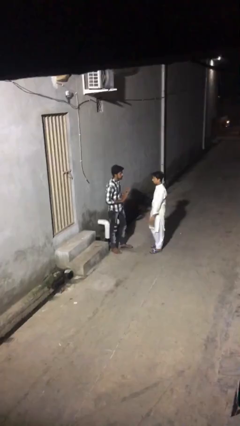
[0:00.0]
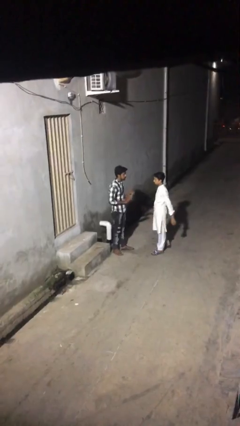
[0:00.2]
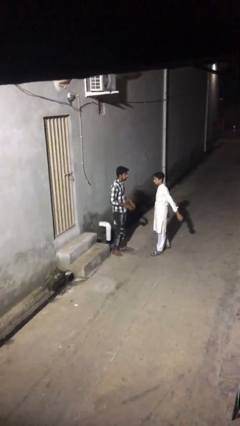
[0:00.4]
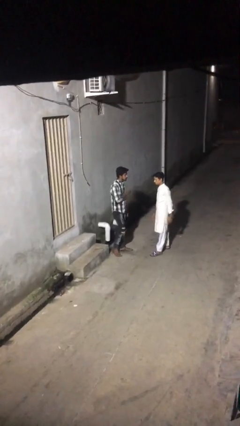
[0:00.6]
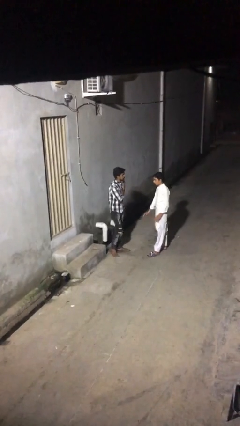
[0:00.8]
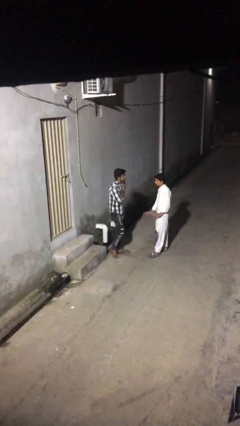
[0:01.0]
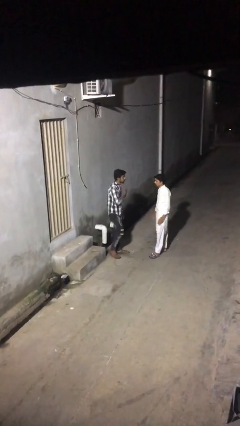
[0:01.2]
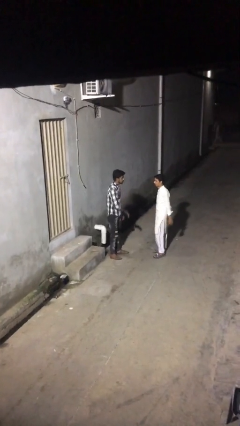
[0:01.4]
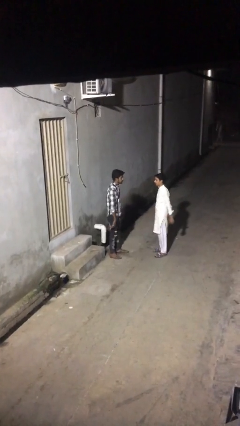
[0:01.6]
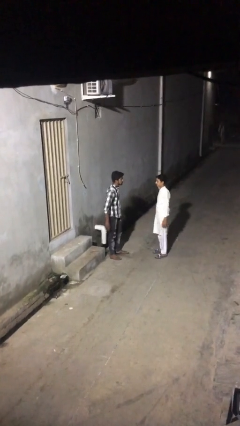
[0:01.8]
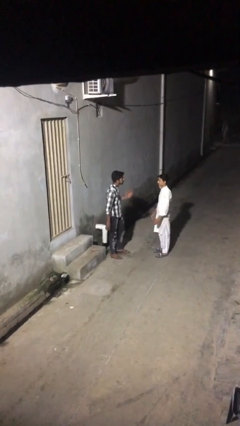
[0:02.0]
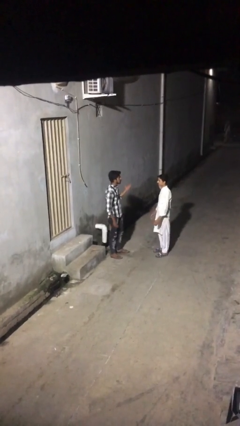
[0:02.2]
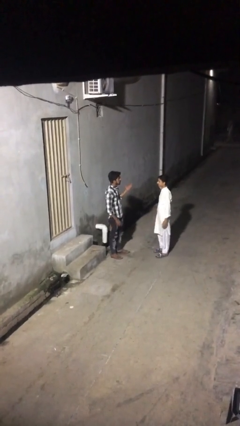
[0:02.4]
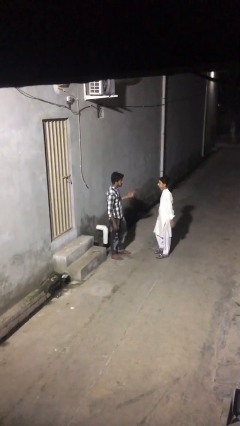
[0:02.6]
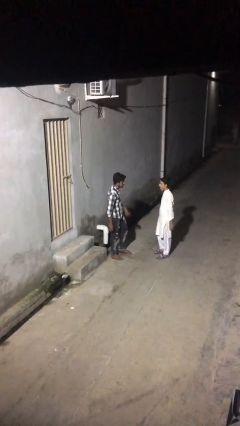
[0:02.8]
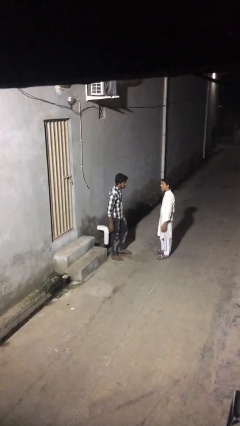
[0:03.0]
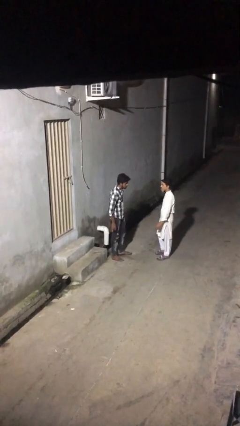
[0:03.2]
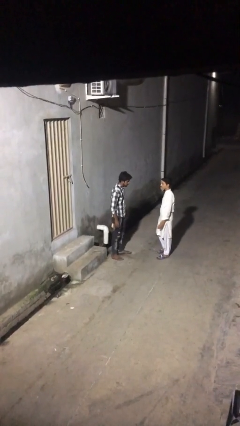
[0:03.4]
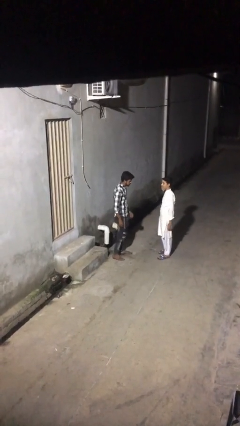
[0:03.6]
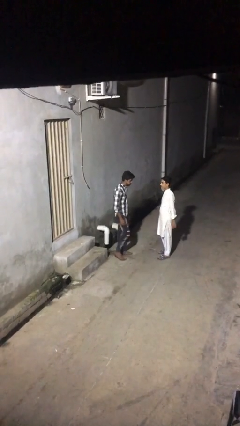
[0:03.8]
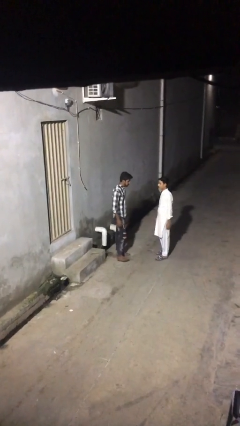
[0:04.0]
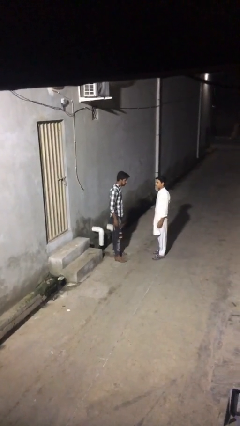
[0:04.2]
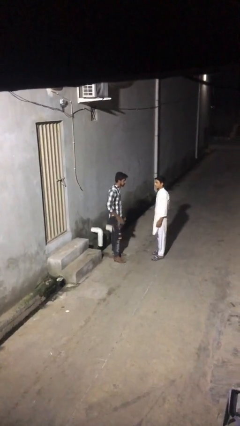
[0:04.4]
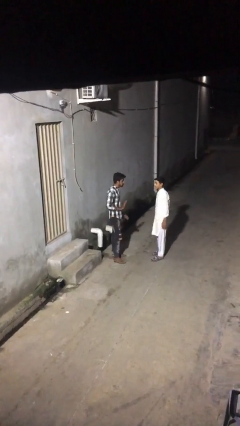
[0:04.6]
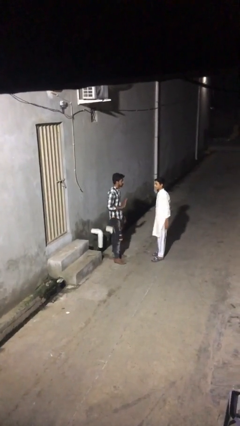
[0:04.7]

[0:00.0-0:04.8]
person talks to person

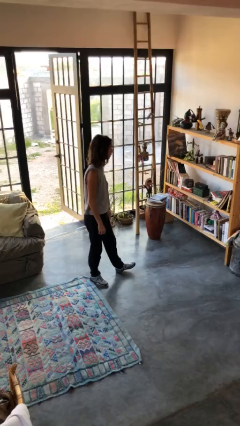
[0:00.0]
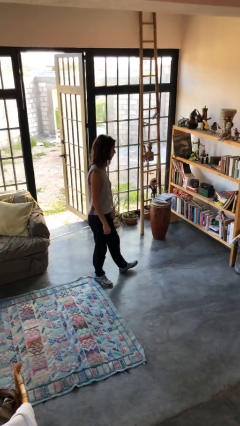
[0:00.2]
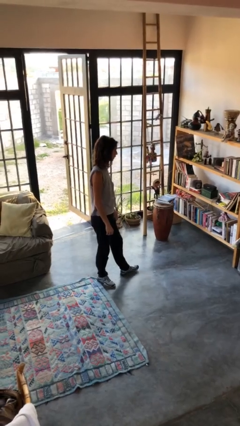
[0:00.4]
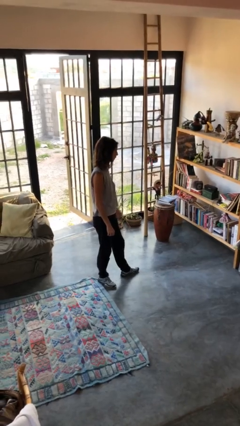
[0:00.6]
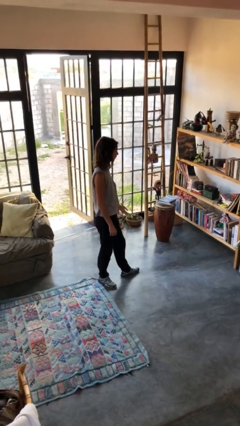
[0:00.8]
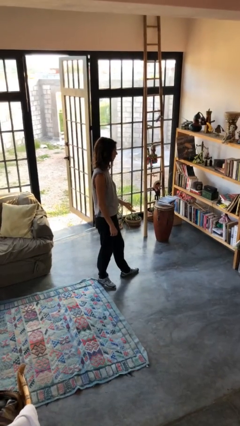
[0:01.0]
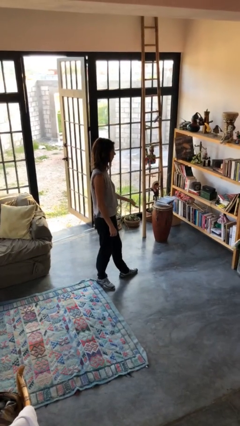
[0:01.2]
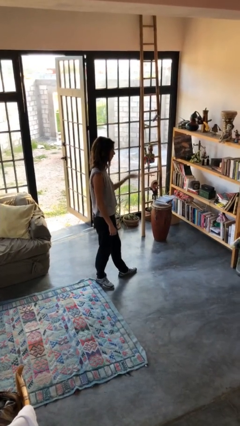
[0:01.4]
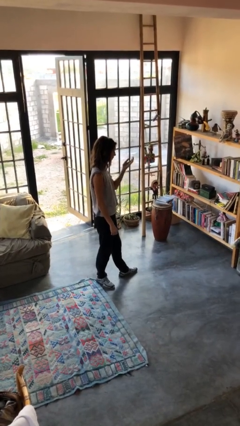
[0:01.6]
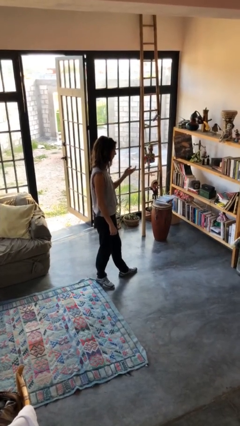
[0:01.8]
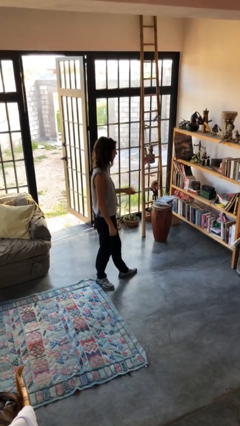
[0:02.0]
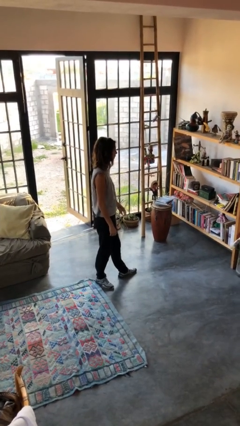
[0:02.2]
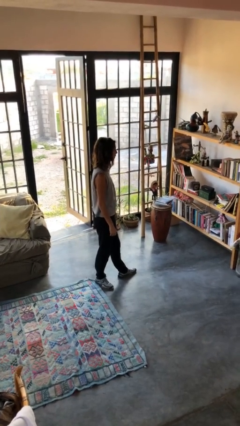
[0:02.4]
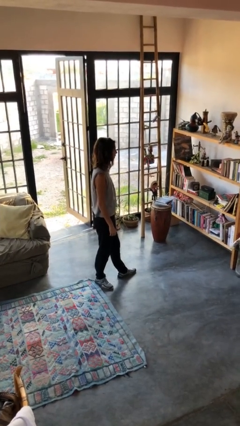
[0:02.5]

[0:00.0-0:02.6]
person gestures swipe up

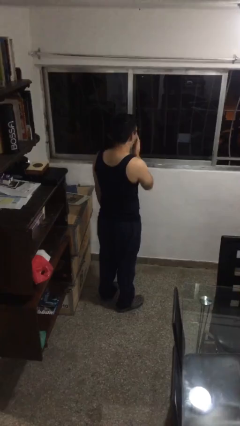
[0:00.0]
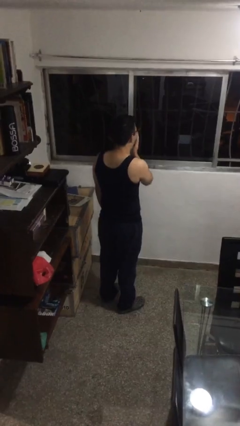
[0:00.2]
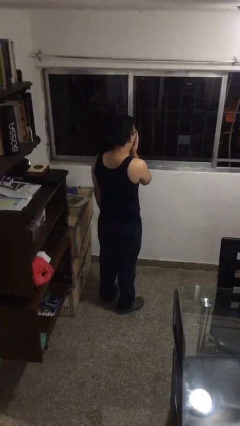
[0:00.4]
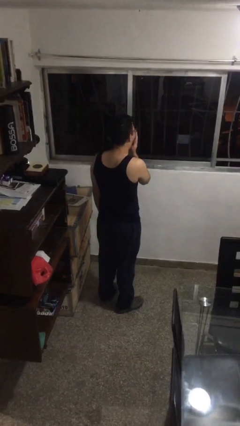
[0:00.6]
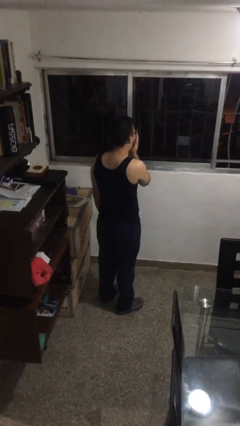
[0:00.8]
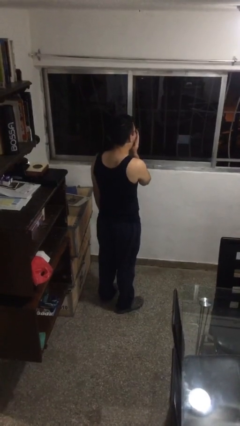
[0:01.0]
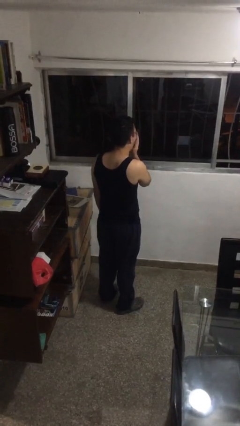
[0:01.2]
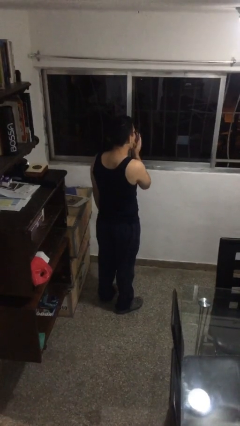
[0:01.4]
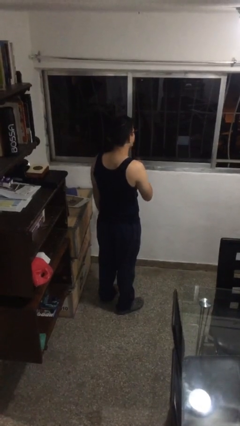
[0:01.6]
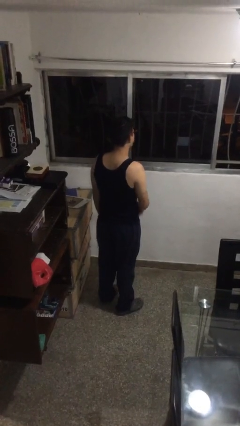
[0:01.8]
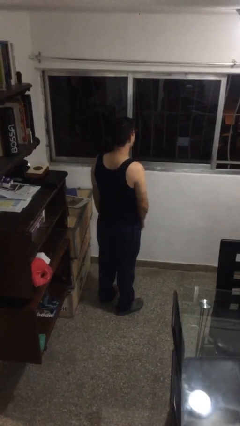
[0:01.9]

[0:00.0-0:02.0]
person yawns

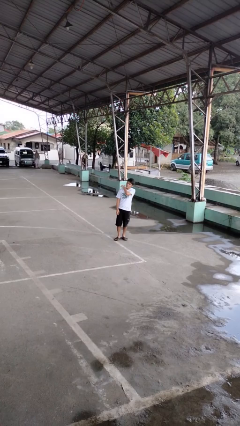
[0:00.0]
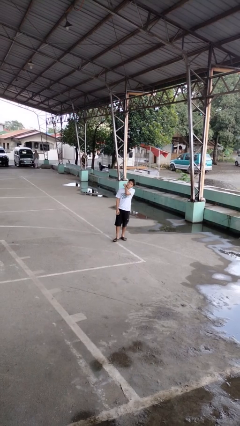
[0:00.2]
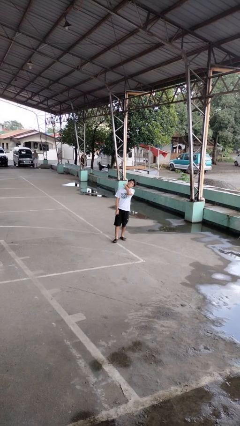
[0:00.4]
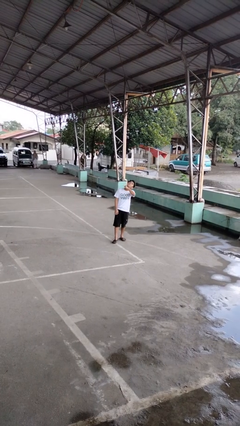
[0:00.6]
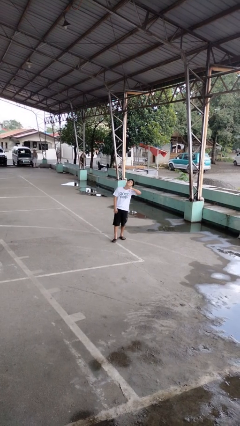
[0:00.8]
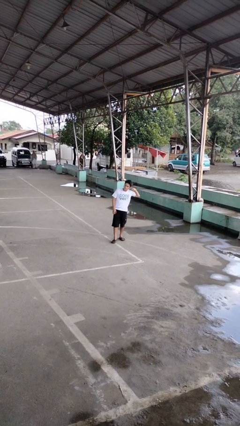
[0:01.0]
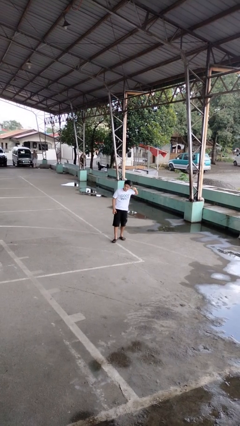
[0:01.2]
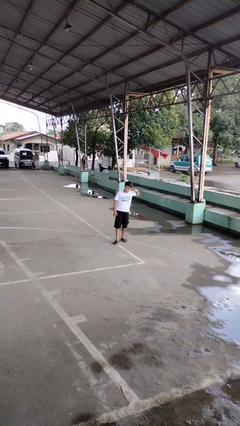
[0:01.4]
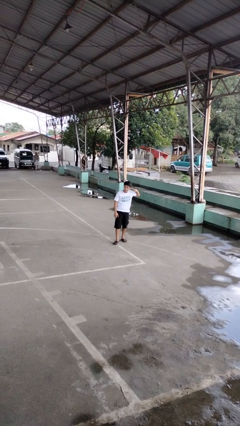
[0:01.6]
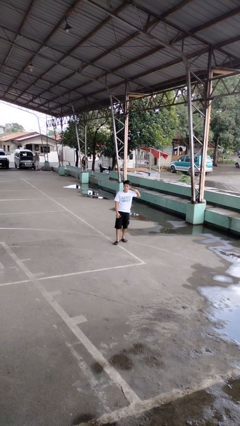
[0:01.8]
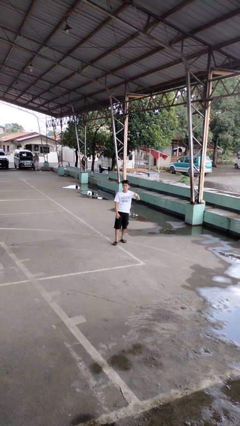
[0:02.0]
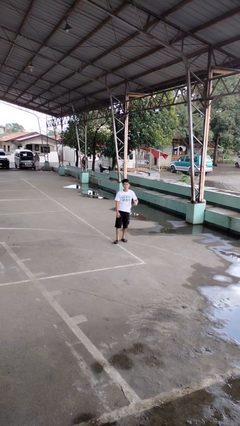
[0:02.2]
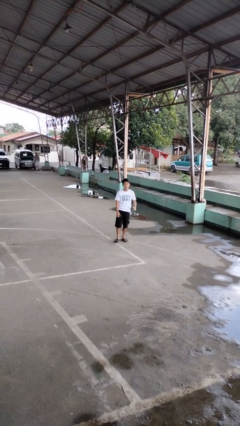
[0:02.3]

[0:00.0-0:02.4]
person gestures cut

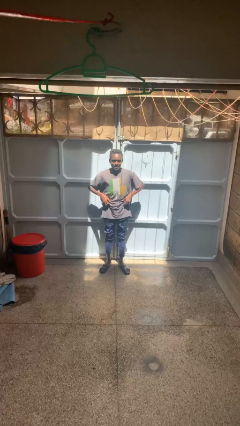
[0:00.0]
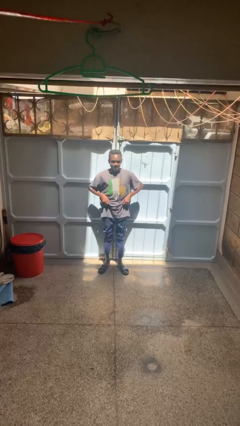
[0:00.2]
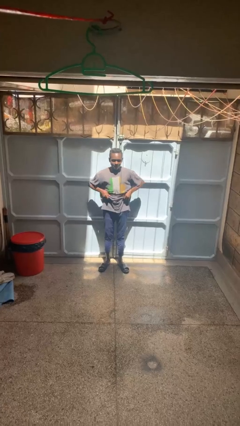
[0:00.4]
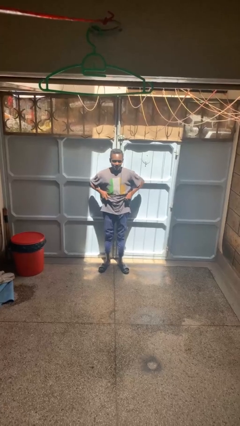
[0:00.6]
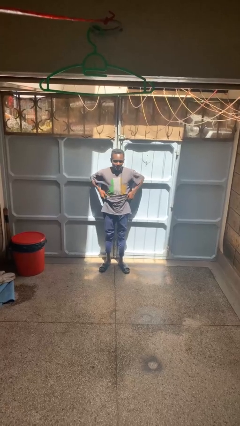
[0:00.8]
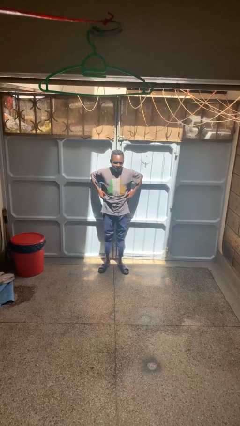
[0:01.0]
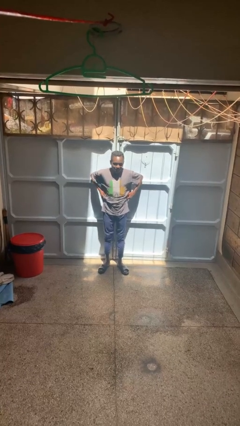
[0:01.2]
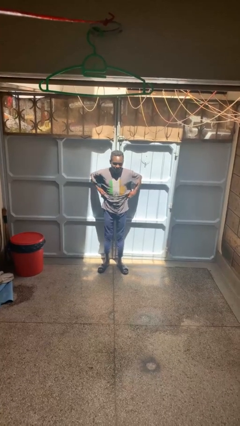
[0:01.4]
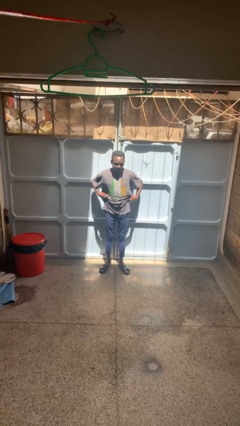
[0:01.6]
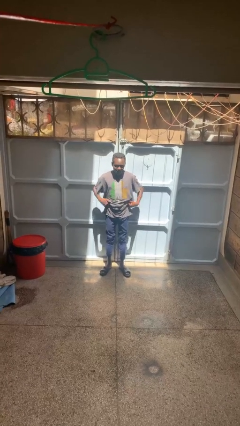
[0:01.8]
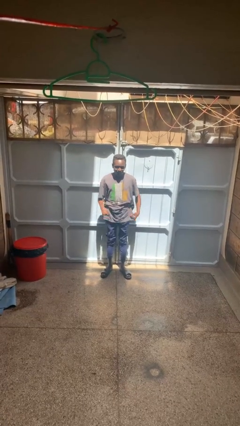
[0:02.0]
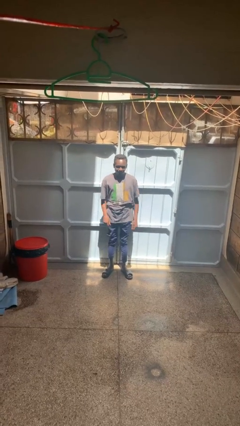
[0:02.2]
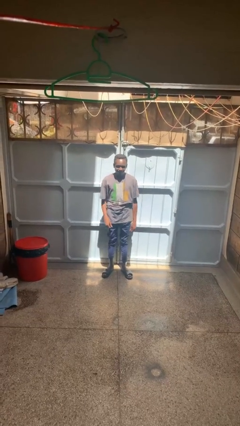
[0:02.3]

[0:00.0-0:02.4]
person hikes up pants

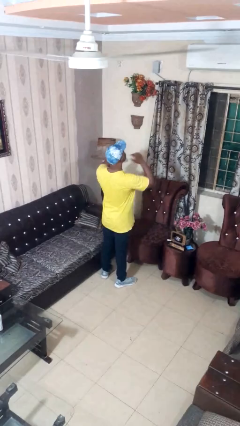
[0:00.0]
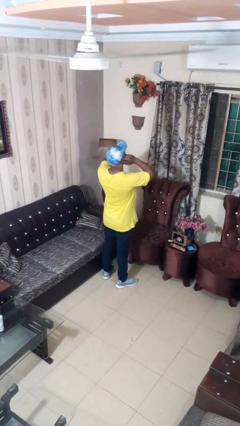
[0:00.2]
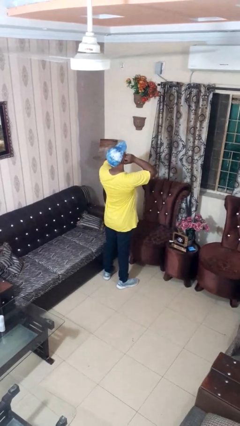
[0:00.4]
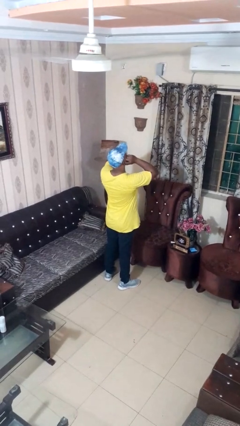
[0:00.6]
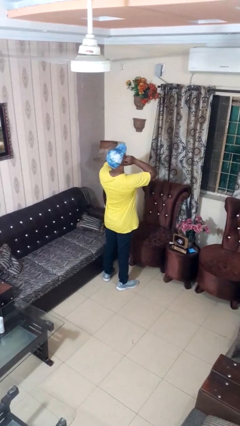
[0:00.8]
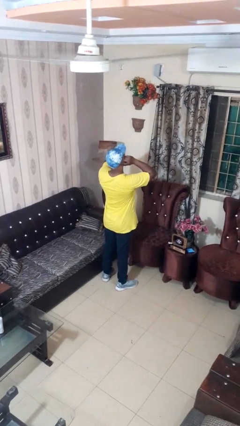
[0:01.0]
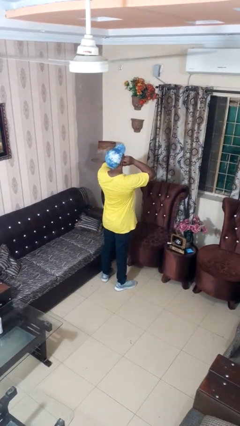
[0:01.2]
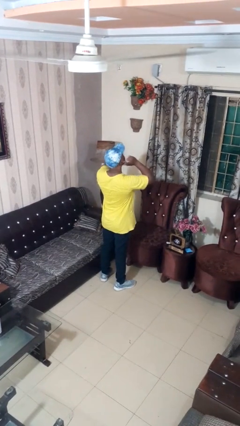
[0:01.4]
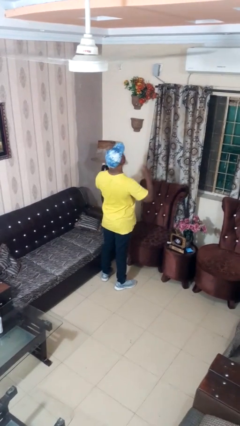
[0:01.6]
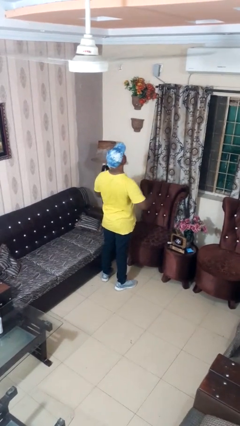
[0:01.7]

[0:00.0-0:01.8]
person puts fingers in ear

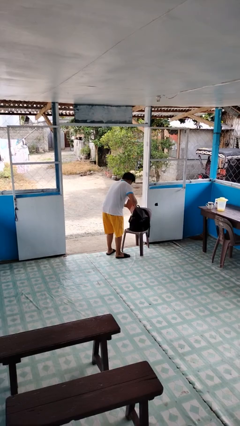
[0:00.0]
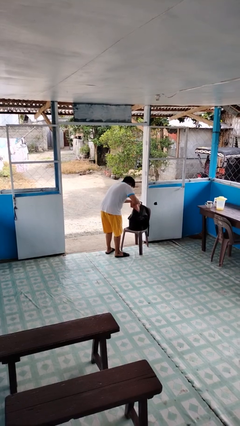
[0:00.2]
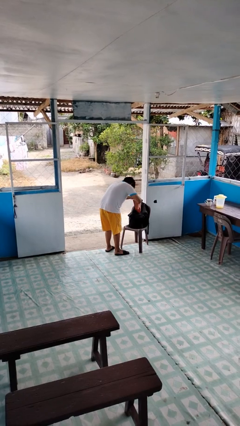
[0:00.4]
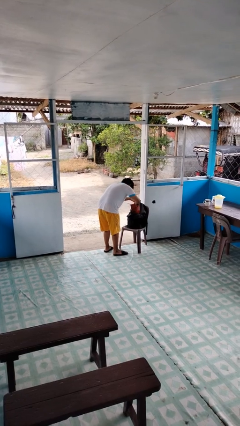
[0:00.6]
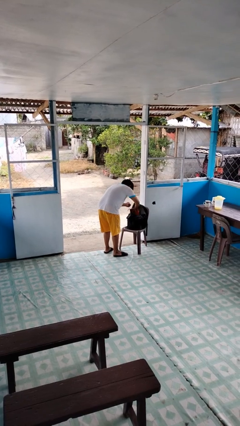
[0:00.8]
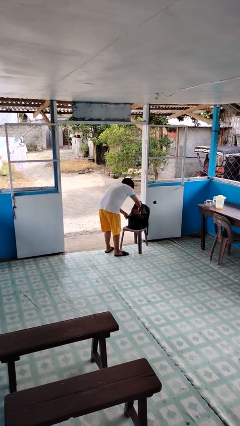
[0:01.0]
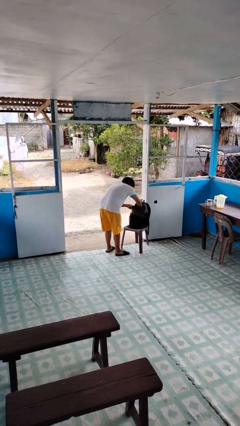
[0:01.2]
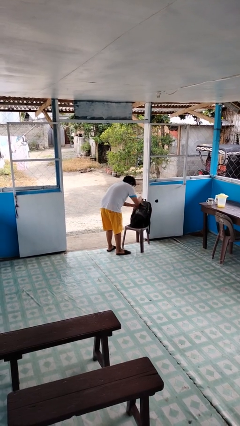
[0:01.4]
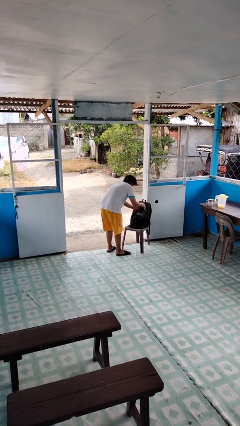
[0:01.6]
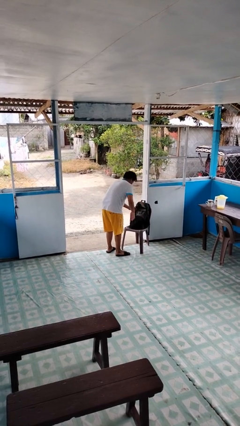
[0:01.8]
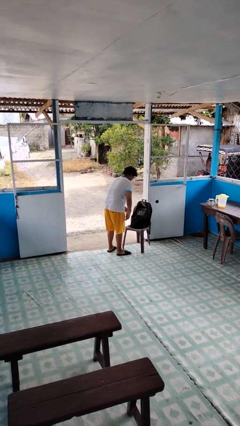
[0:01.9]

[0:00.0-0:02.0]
person puts object into backpack
